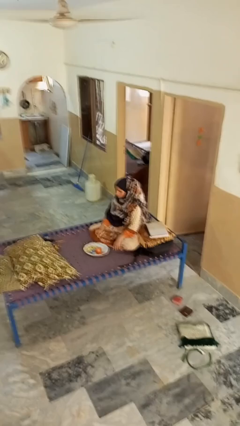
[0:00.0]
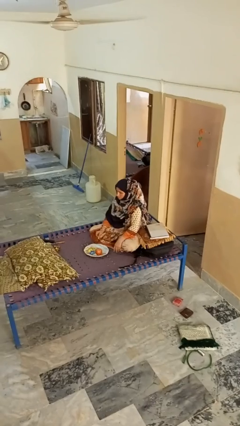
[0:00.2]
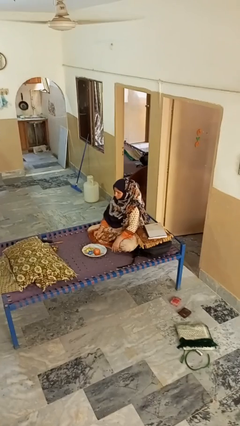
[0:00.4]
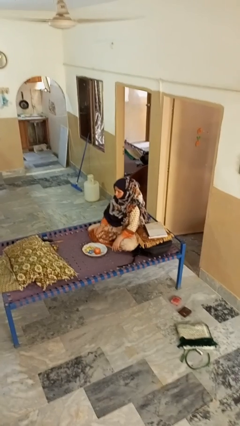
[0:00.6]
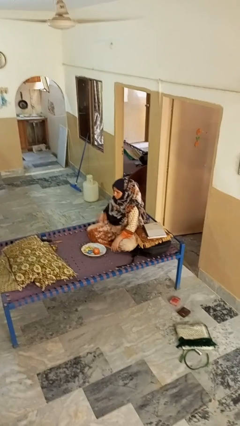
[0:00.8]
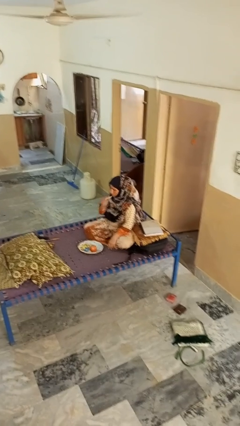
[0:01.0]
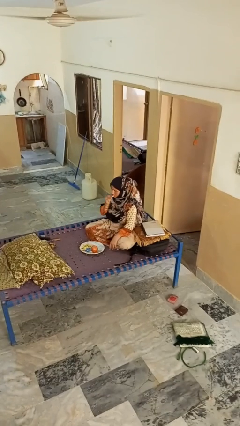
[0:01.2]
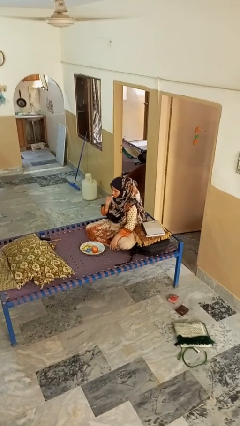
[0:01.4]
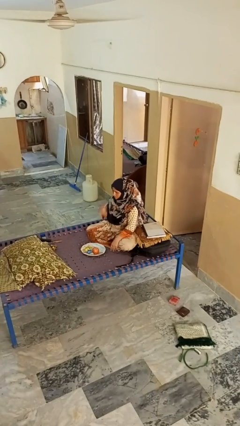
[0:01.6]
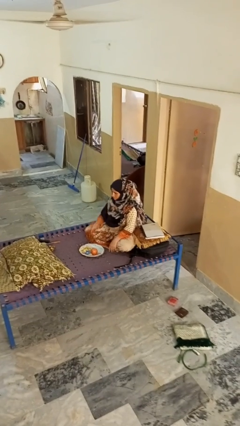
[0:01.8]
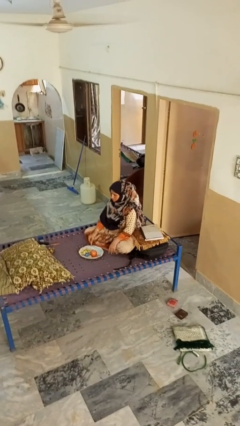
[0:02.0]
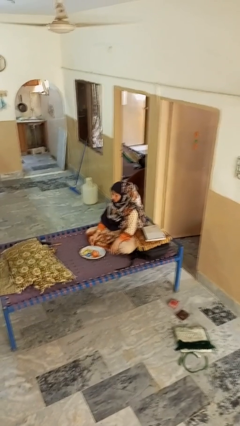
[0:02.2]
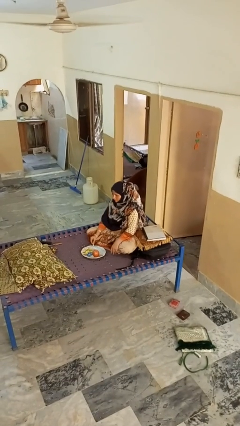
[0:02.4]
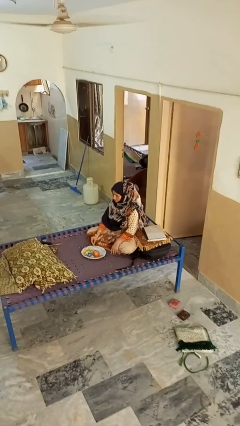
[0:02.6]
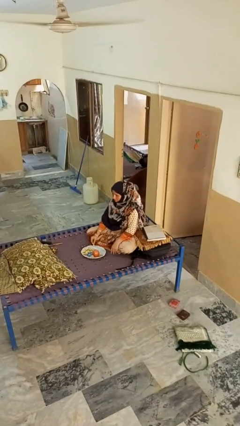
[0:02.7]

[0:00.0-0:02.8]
person eats apple

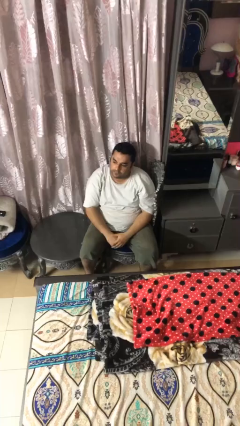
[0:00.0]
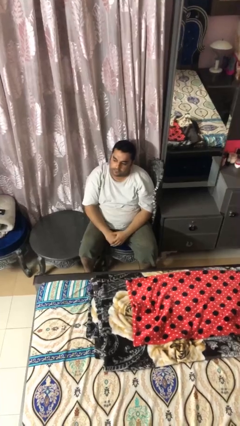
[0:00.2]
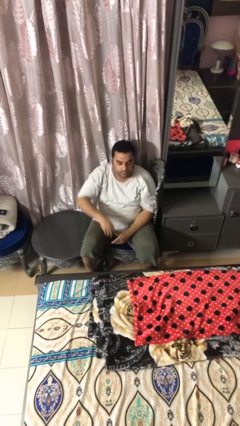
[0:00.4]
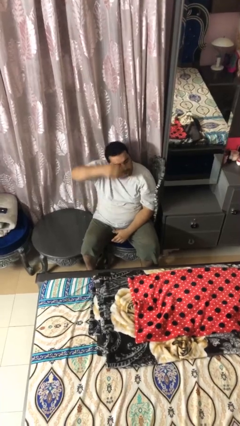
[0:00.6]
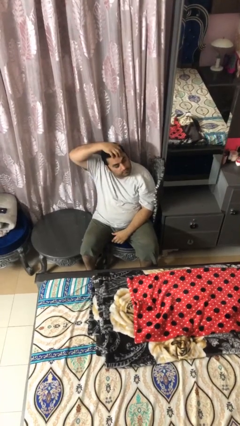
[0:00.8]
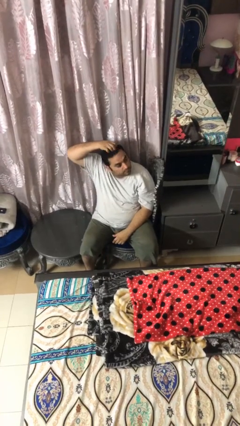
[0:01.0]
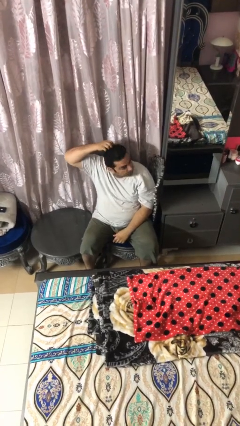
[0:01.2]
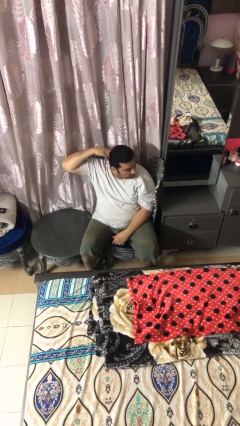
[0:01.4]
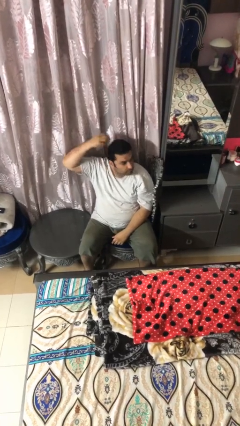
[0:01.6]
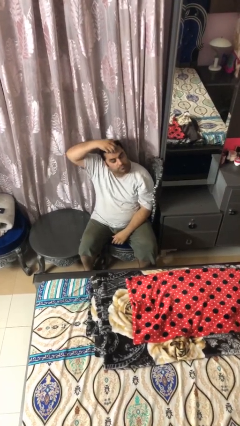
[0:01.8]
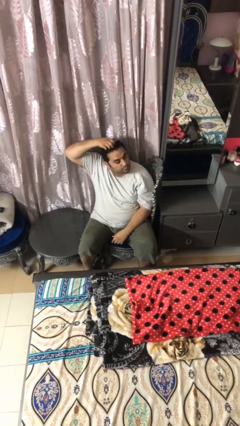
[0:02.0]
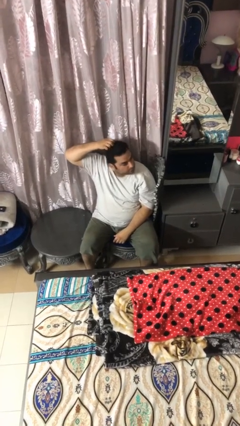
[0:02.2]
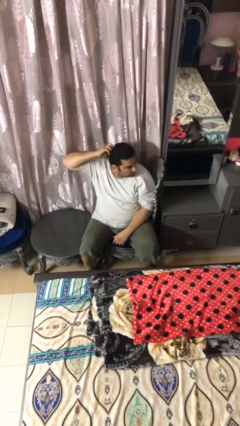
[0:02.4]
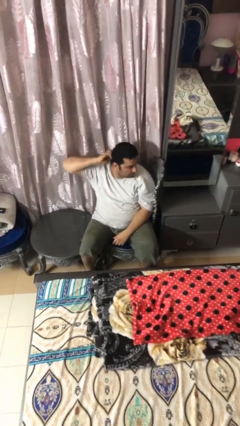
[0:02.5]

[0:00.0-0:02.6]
person strokes hair

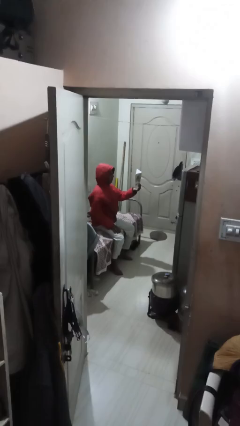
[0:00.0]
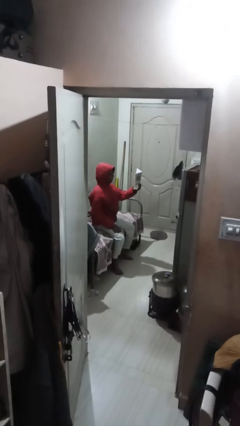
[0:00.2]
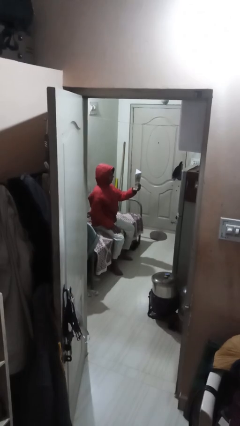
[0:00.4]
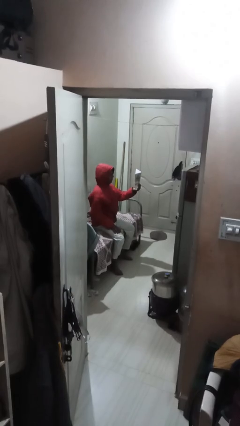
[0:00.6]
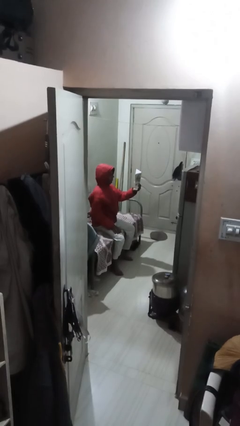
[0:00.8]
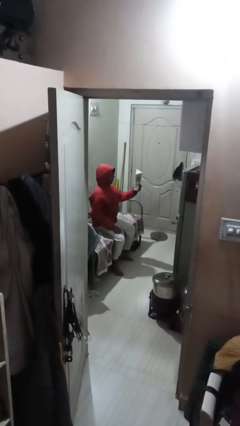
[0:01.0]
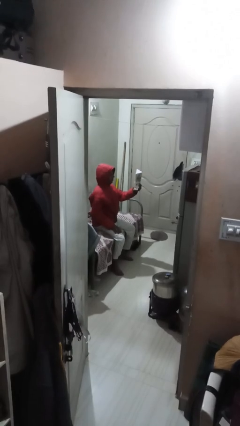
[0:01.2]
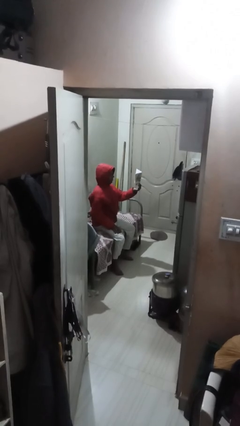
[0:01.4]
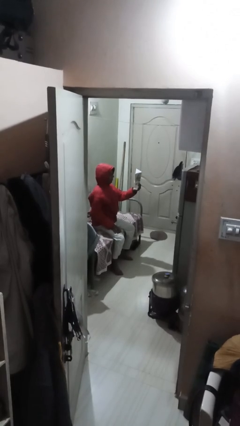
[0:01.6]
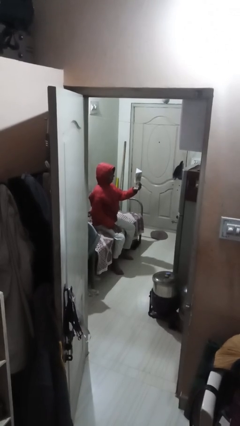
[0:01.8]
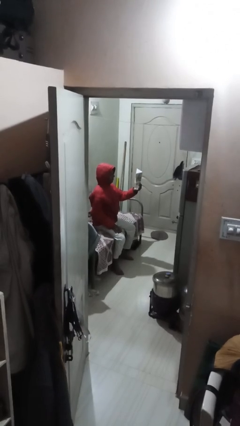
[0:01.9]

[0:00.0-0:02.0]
person reads document

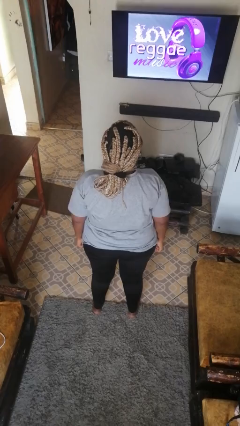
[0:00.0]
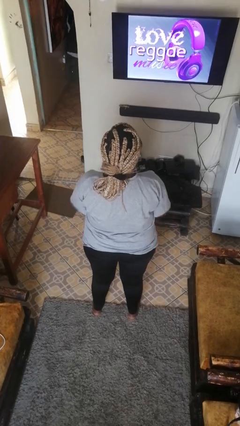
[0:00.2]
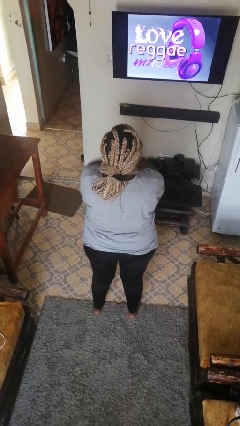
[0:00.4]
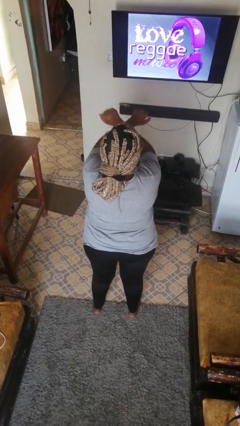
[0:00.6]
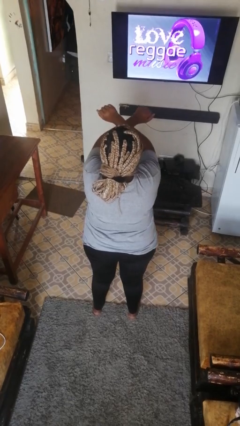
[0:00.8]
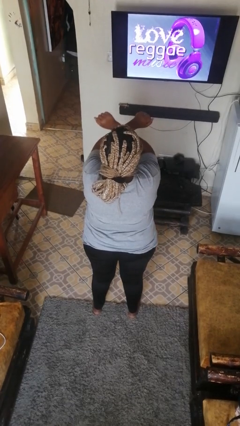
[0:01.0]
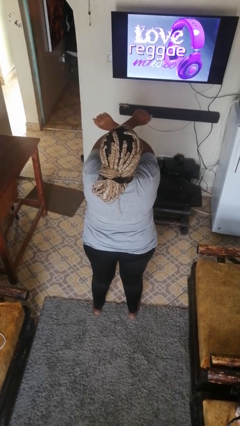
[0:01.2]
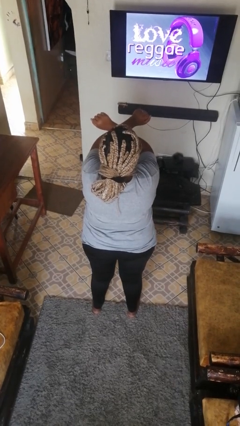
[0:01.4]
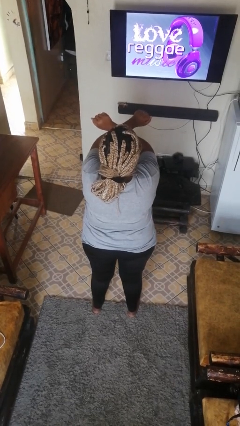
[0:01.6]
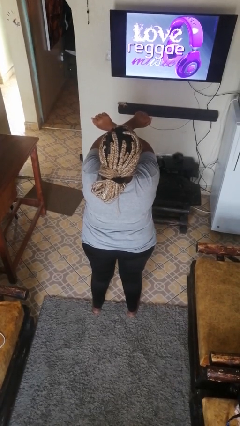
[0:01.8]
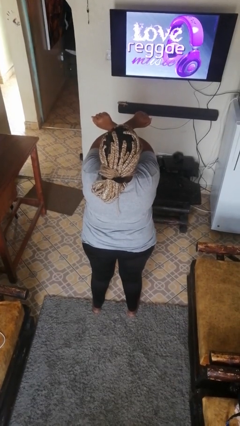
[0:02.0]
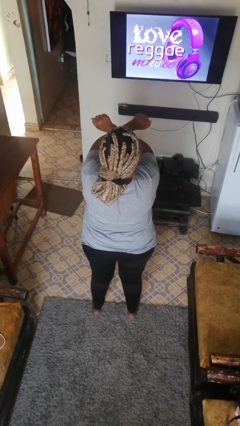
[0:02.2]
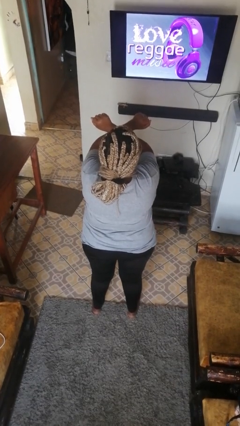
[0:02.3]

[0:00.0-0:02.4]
person gestures arms x

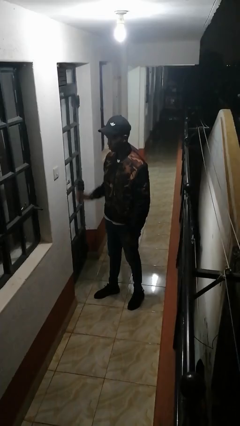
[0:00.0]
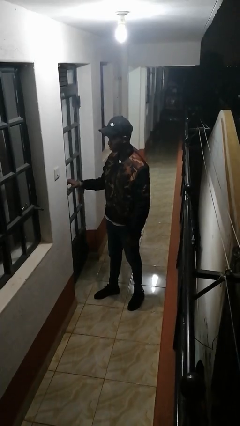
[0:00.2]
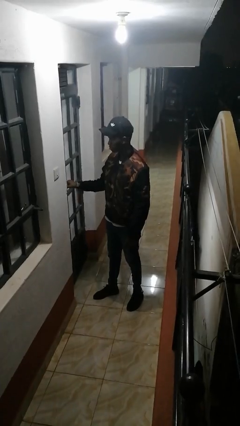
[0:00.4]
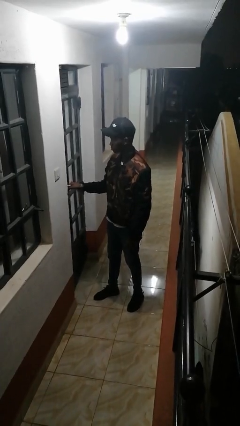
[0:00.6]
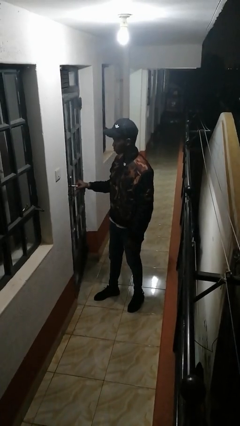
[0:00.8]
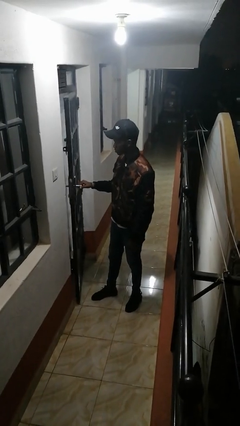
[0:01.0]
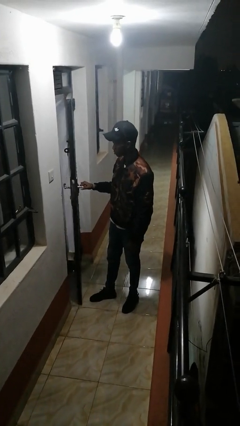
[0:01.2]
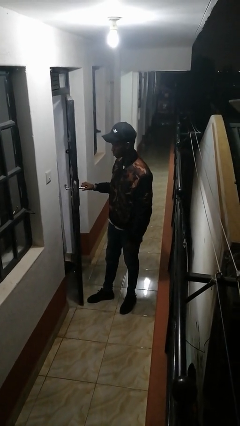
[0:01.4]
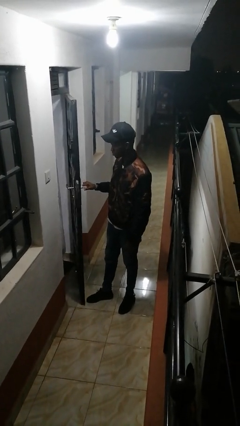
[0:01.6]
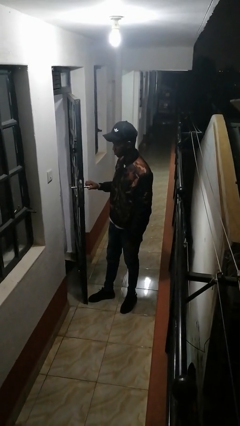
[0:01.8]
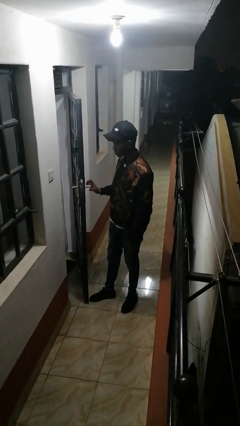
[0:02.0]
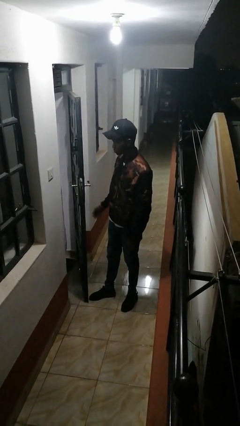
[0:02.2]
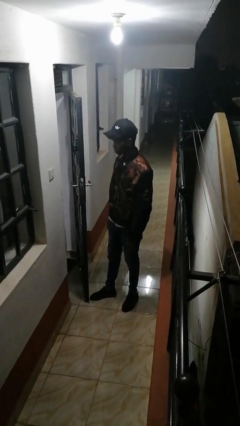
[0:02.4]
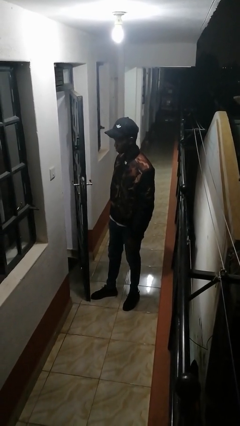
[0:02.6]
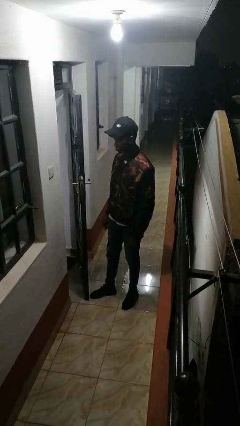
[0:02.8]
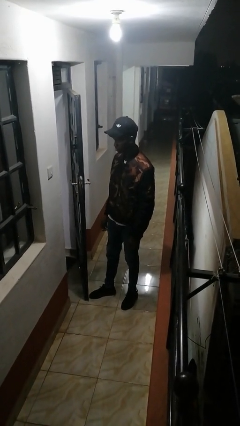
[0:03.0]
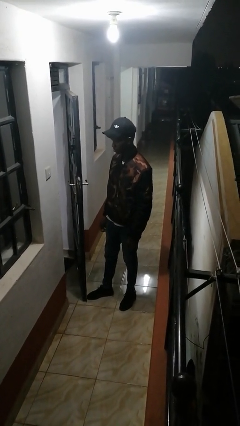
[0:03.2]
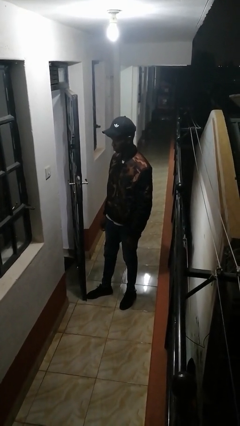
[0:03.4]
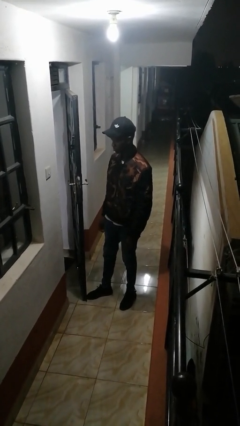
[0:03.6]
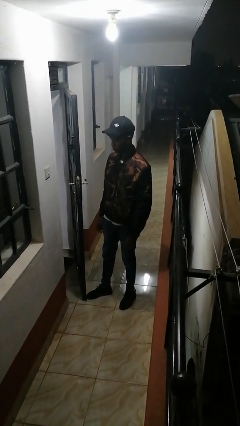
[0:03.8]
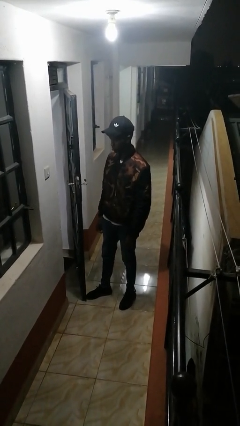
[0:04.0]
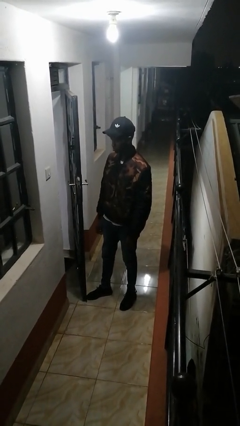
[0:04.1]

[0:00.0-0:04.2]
person opens facility door

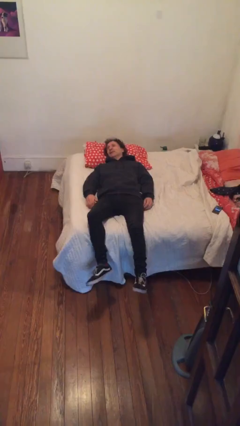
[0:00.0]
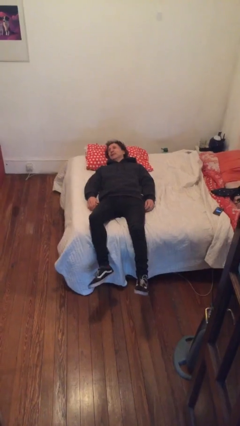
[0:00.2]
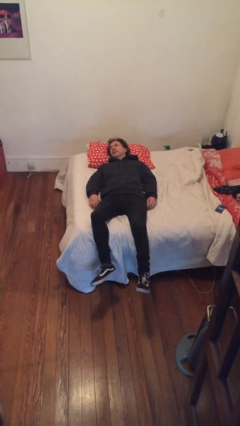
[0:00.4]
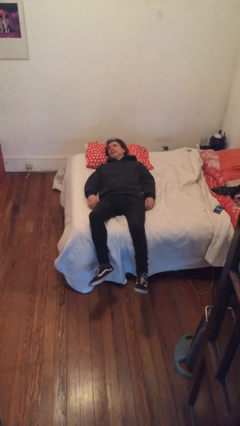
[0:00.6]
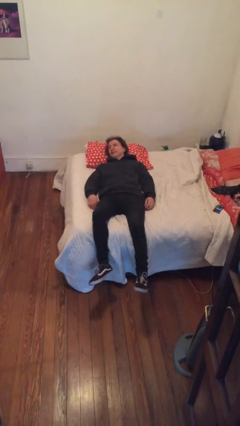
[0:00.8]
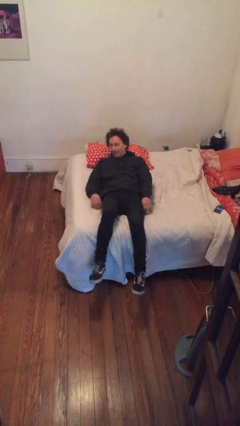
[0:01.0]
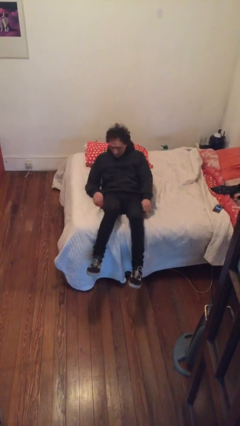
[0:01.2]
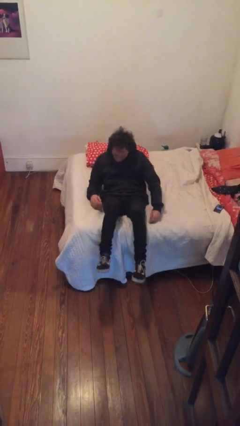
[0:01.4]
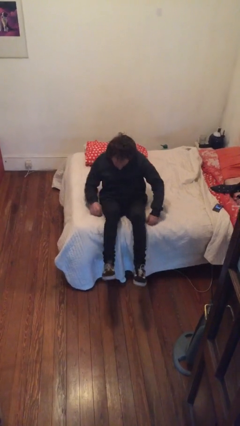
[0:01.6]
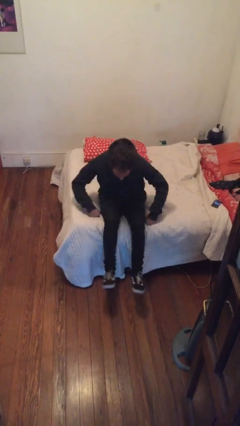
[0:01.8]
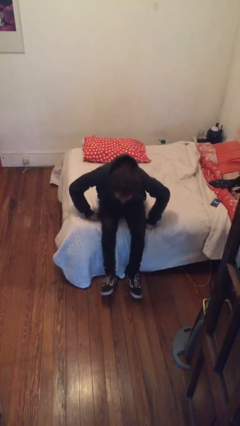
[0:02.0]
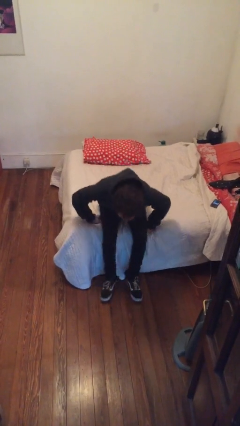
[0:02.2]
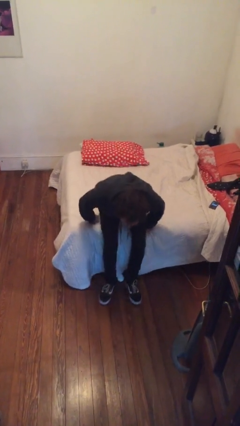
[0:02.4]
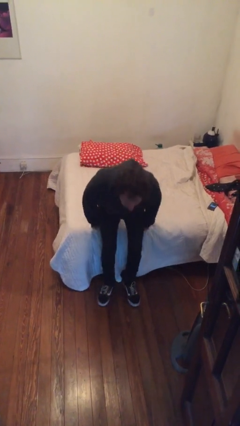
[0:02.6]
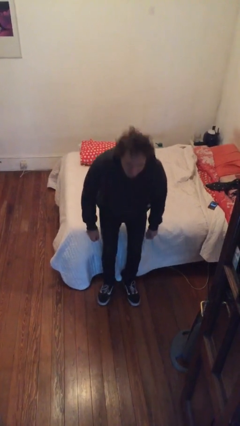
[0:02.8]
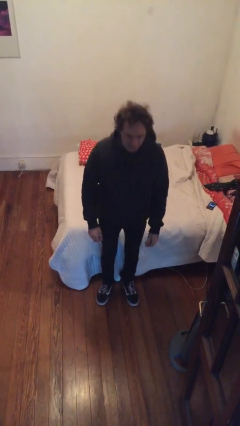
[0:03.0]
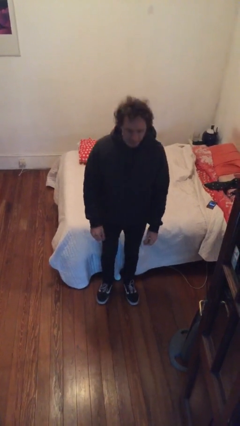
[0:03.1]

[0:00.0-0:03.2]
person stands up

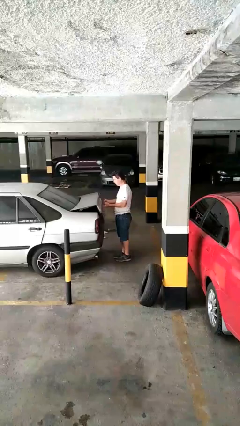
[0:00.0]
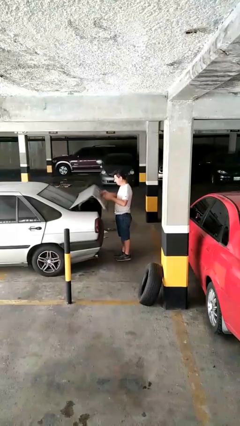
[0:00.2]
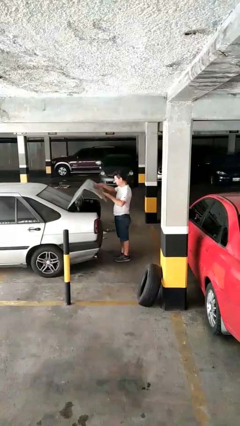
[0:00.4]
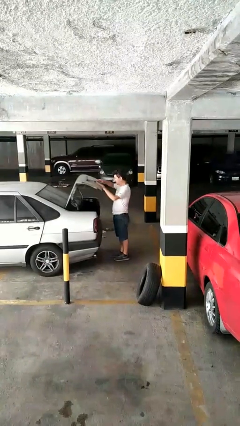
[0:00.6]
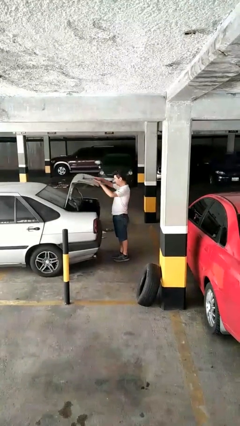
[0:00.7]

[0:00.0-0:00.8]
person opens car trunk
